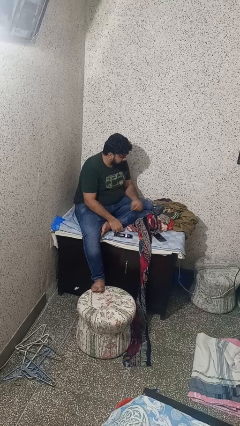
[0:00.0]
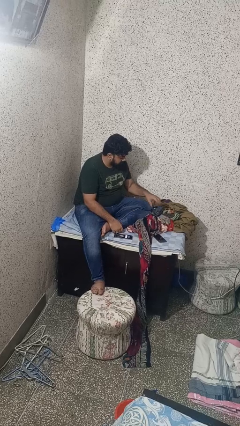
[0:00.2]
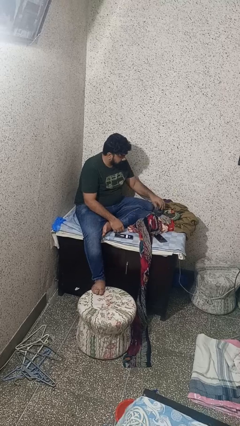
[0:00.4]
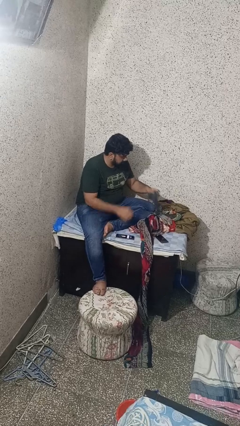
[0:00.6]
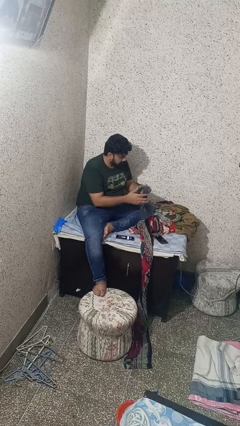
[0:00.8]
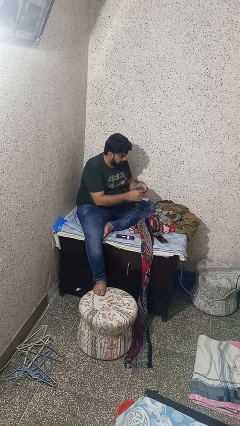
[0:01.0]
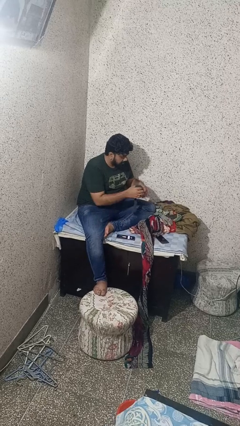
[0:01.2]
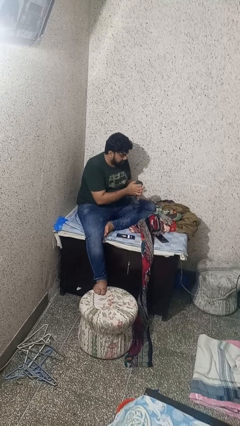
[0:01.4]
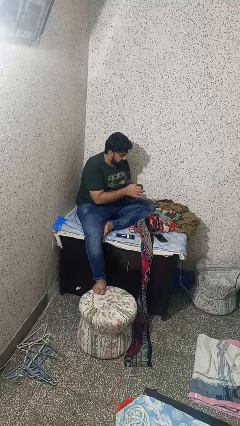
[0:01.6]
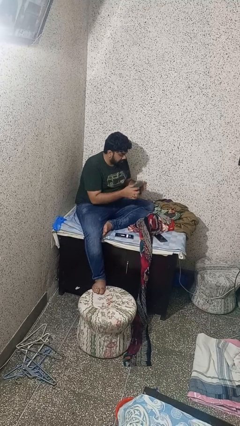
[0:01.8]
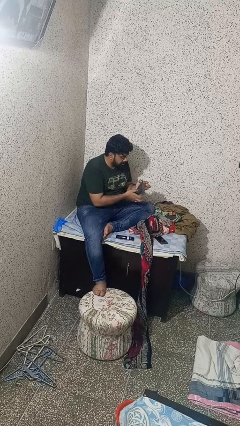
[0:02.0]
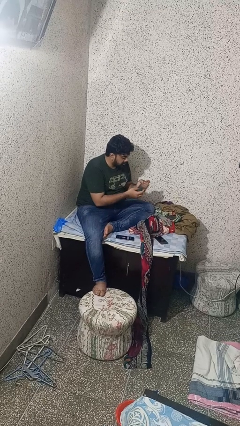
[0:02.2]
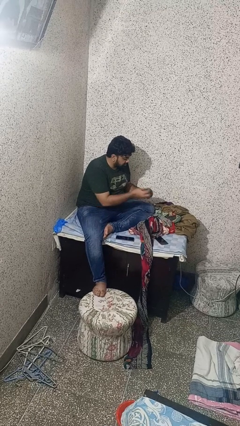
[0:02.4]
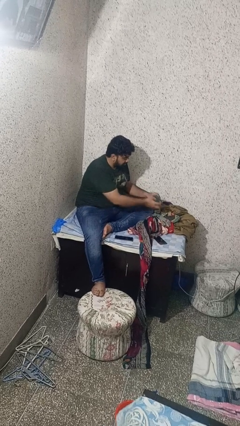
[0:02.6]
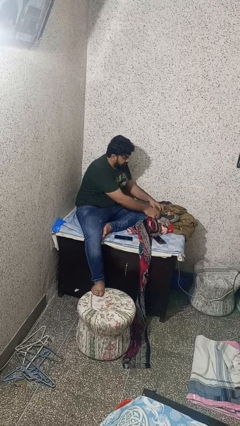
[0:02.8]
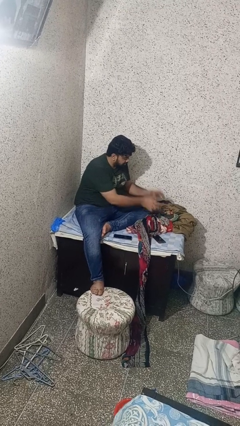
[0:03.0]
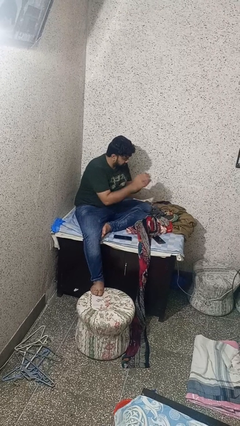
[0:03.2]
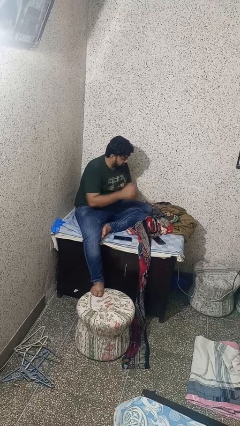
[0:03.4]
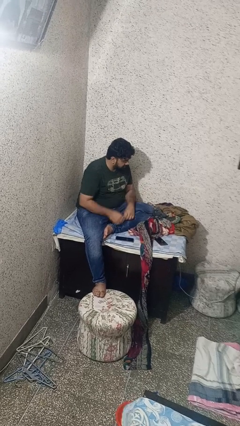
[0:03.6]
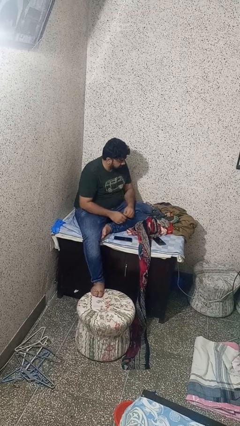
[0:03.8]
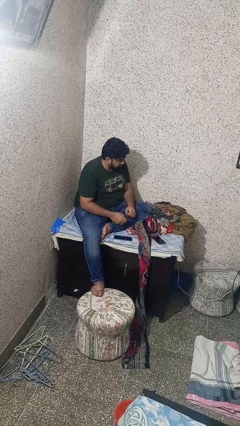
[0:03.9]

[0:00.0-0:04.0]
person folds socks

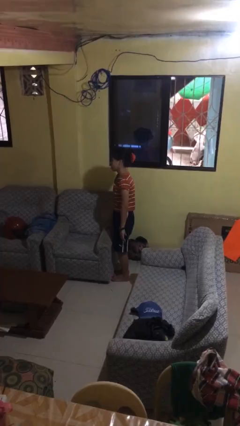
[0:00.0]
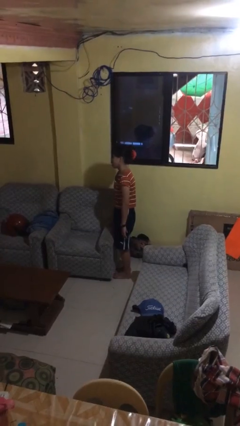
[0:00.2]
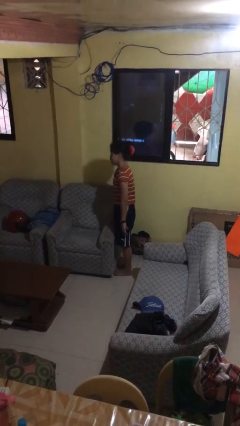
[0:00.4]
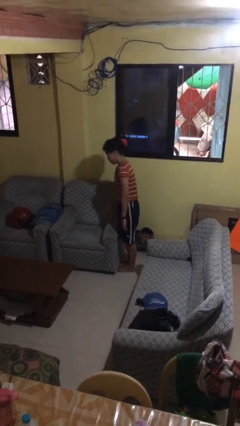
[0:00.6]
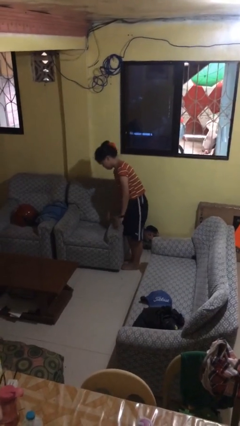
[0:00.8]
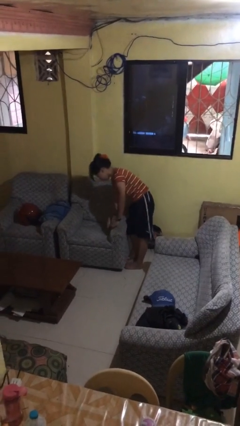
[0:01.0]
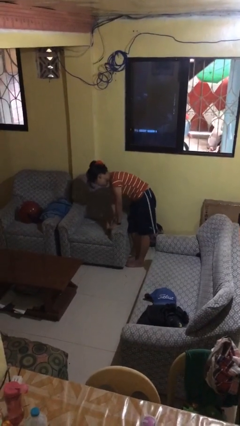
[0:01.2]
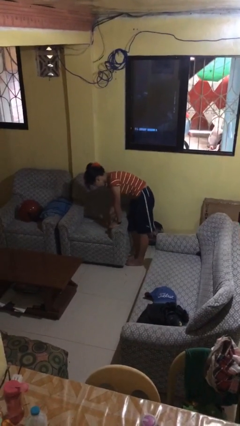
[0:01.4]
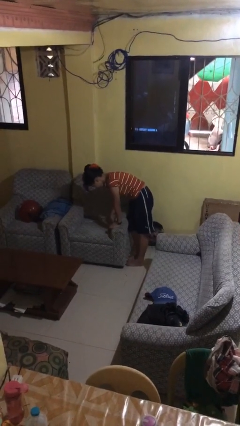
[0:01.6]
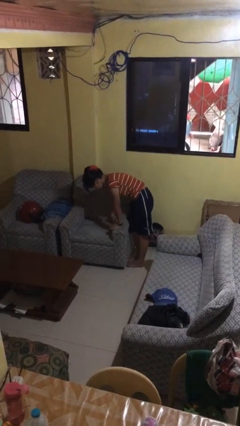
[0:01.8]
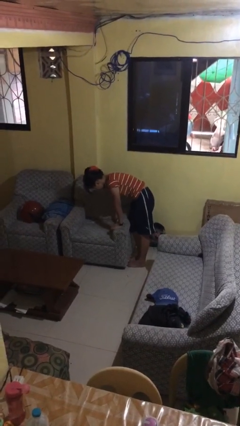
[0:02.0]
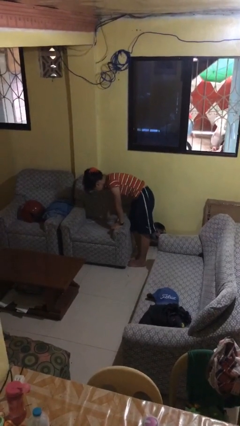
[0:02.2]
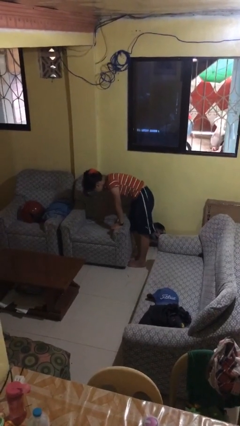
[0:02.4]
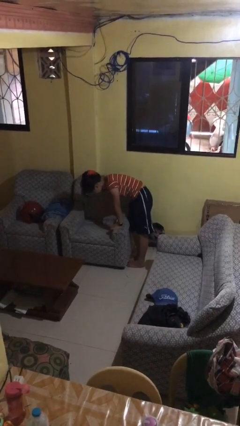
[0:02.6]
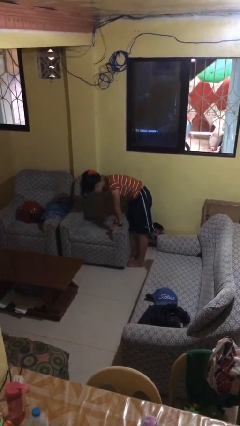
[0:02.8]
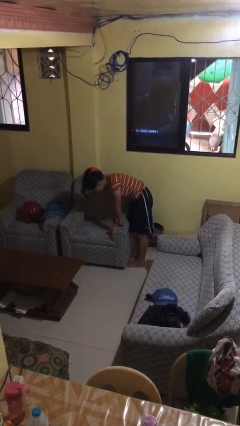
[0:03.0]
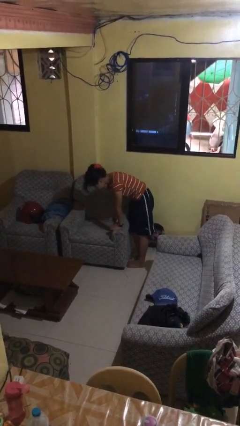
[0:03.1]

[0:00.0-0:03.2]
person searches in couch

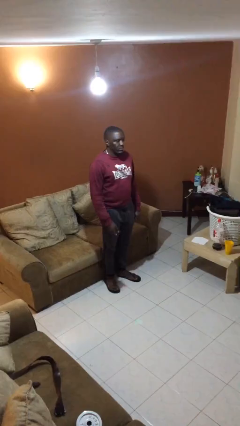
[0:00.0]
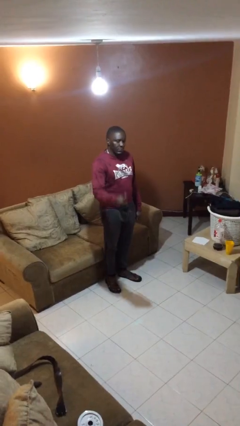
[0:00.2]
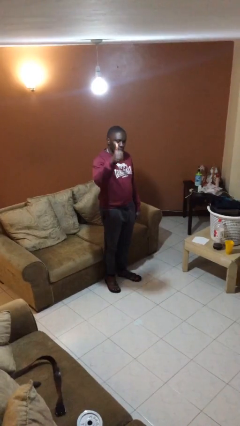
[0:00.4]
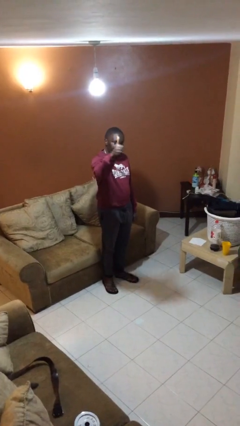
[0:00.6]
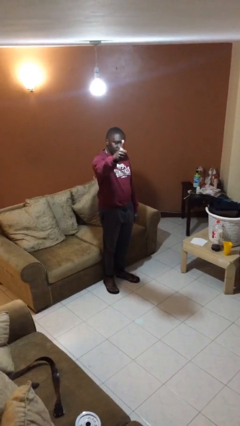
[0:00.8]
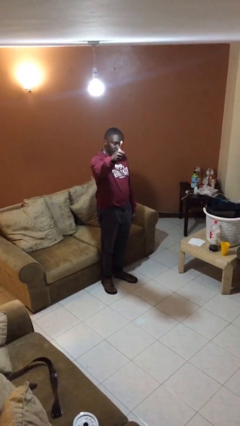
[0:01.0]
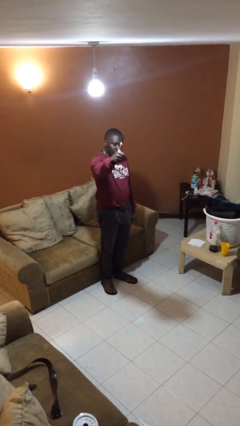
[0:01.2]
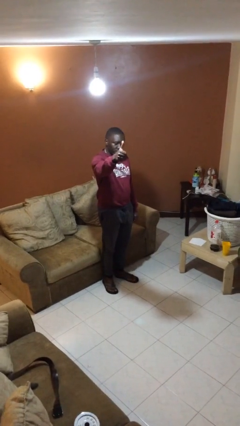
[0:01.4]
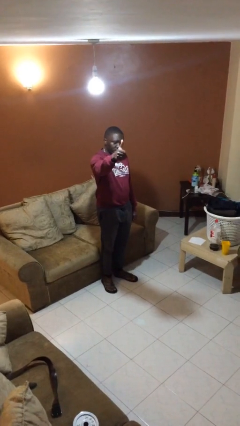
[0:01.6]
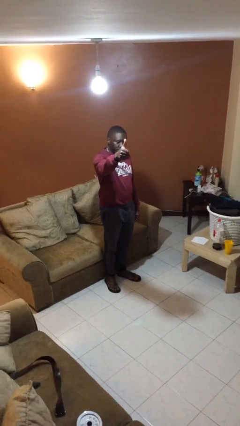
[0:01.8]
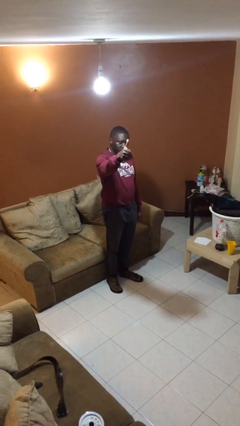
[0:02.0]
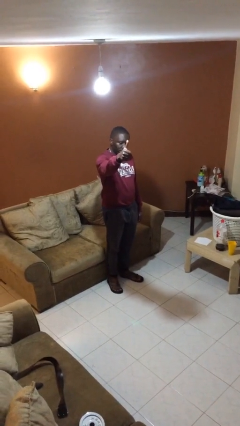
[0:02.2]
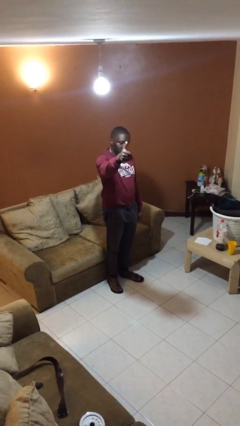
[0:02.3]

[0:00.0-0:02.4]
person gestures thumbs up

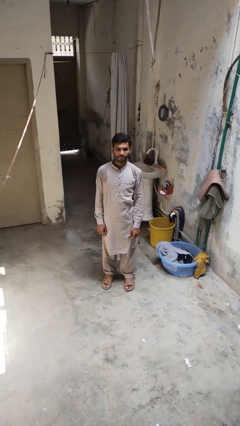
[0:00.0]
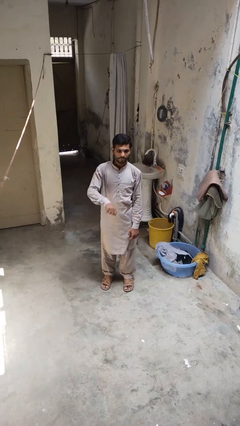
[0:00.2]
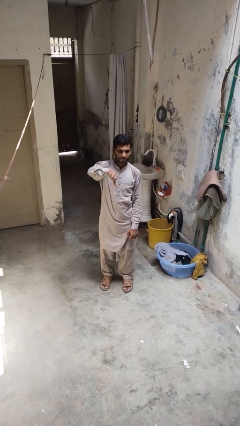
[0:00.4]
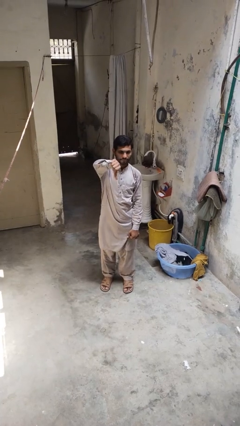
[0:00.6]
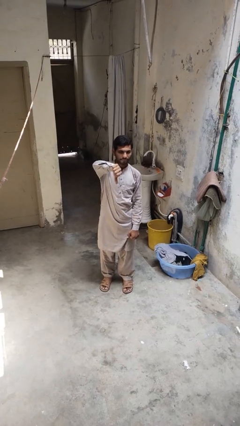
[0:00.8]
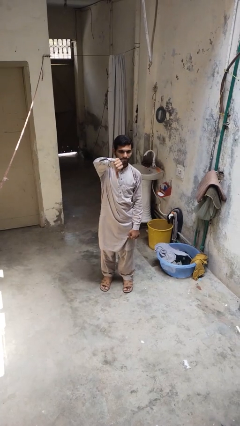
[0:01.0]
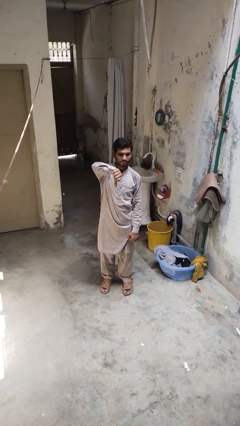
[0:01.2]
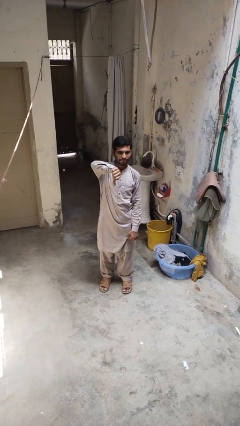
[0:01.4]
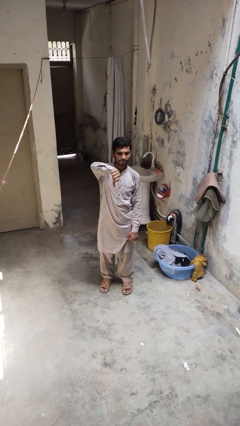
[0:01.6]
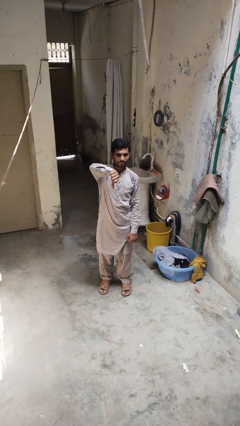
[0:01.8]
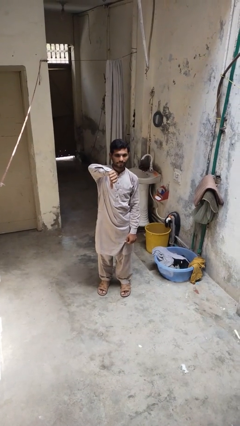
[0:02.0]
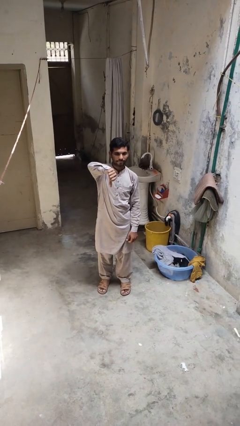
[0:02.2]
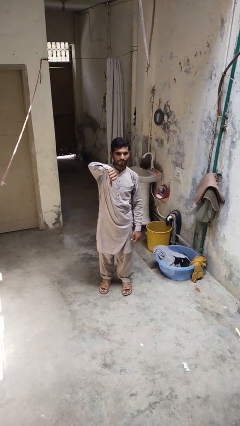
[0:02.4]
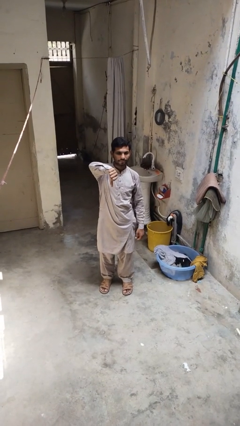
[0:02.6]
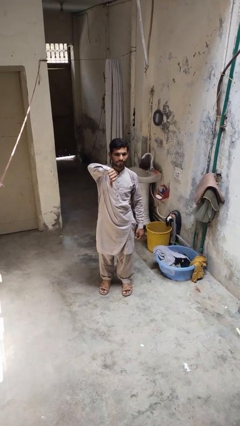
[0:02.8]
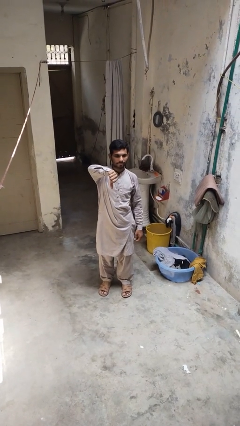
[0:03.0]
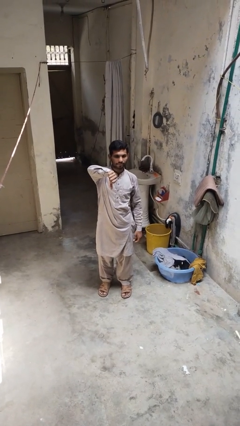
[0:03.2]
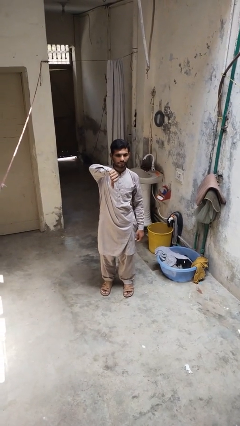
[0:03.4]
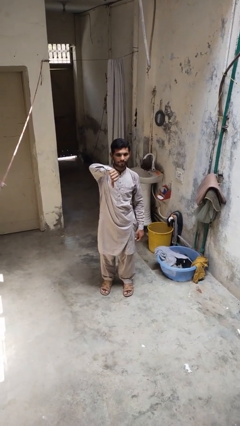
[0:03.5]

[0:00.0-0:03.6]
person gestures thumbs down

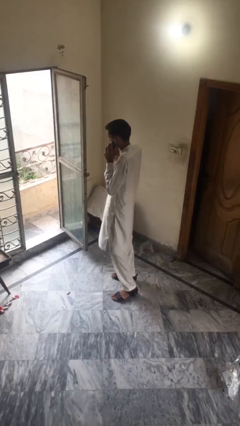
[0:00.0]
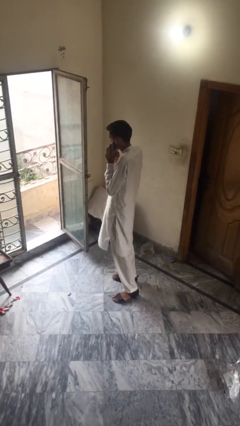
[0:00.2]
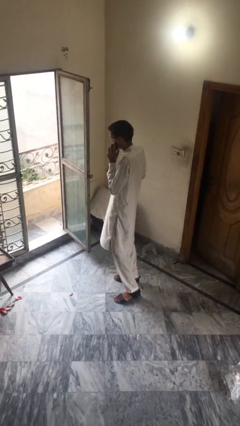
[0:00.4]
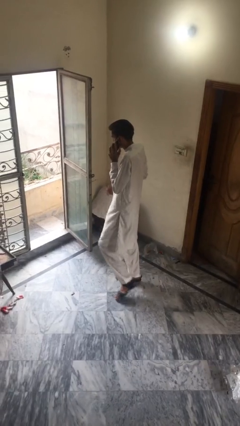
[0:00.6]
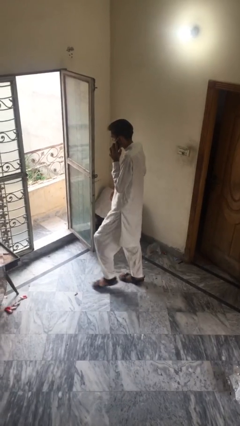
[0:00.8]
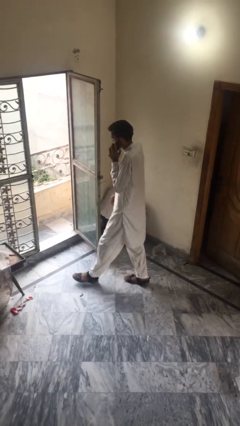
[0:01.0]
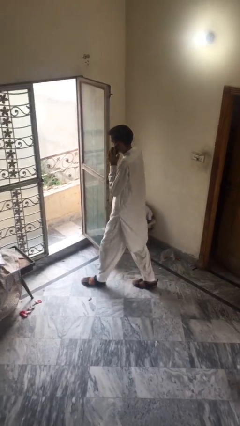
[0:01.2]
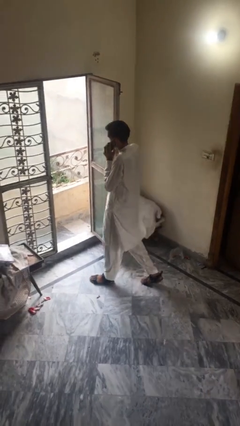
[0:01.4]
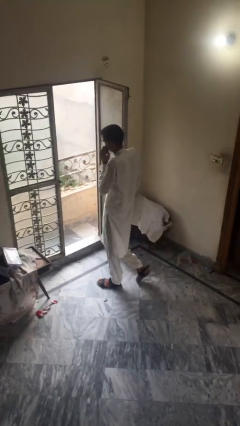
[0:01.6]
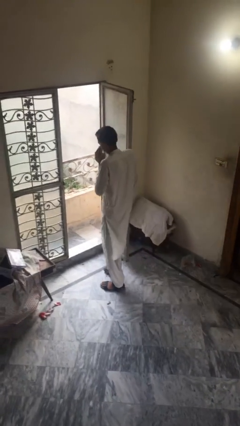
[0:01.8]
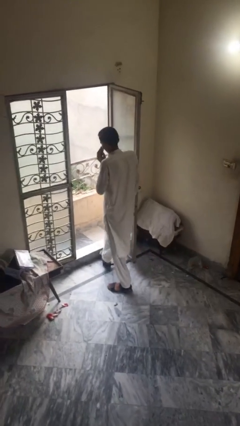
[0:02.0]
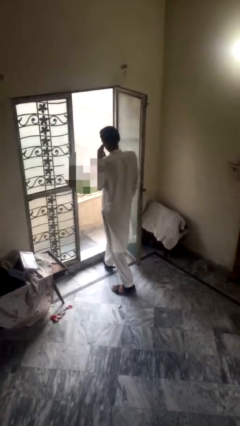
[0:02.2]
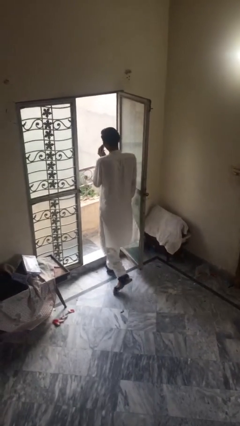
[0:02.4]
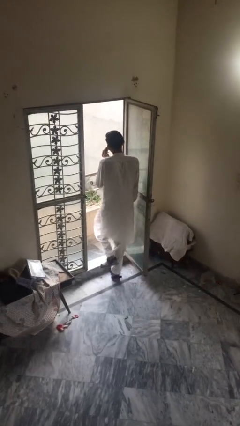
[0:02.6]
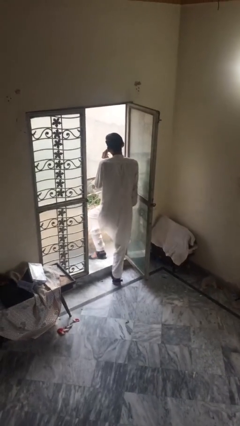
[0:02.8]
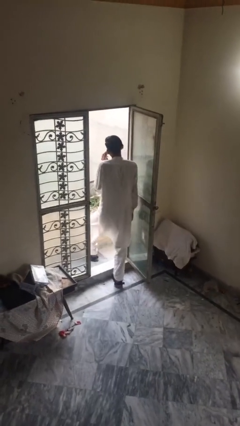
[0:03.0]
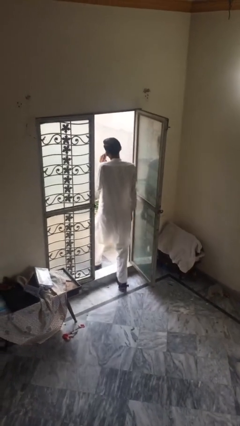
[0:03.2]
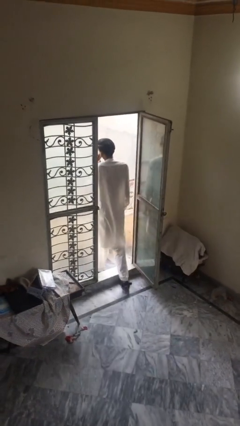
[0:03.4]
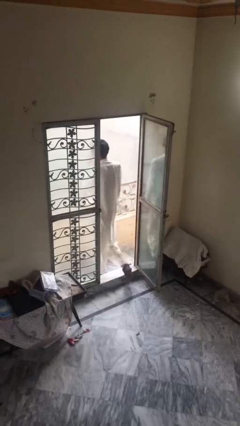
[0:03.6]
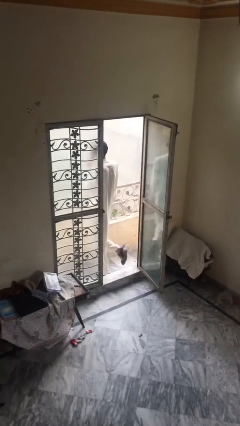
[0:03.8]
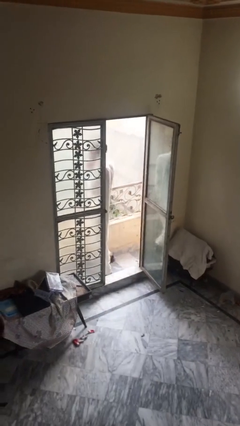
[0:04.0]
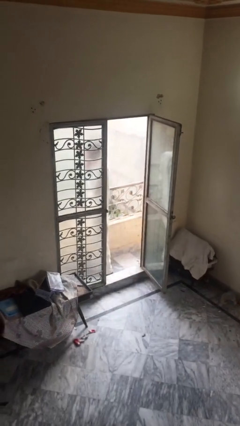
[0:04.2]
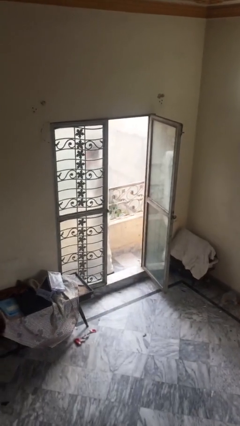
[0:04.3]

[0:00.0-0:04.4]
person exits scene through structure
